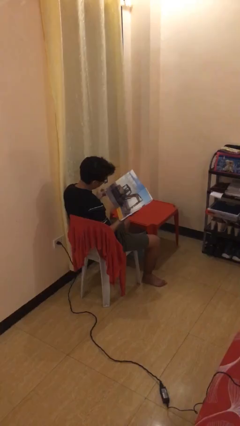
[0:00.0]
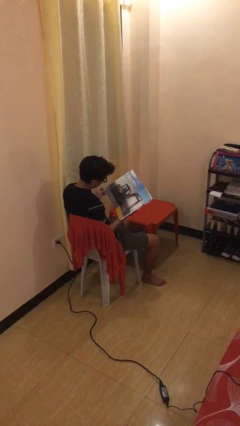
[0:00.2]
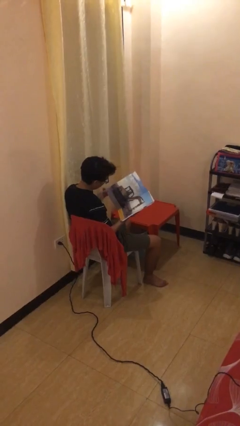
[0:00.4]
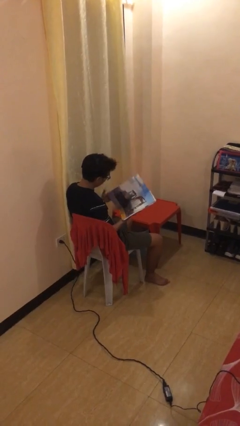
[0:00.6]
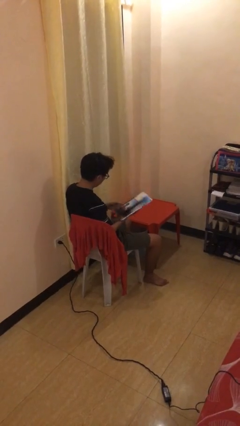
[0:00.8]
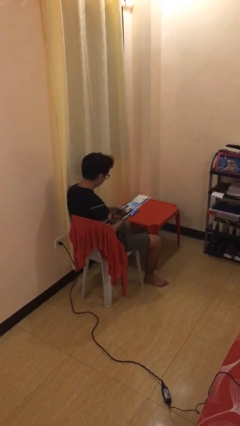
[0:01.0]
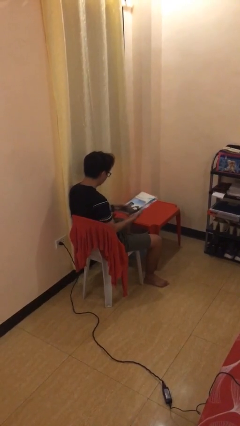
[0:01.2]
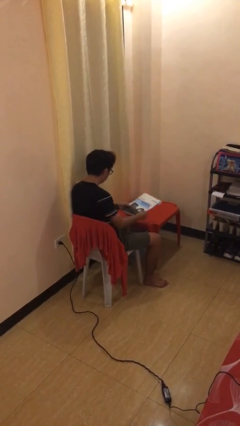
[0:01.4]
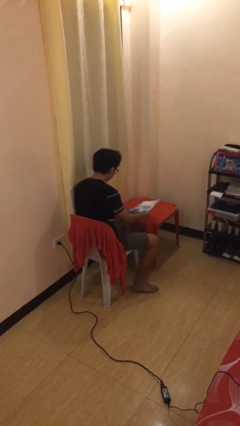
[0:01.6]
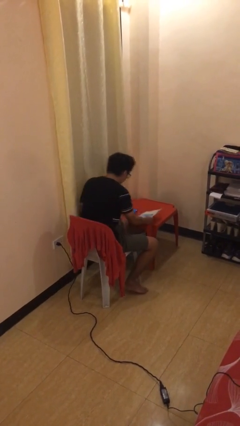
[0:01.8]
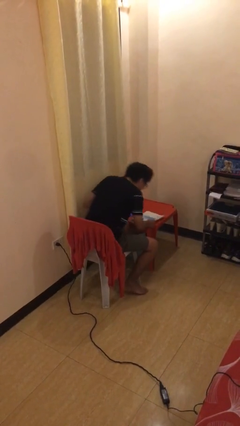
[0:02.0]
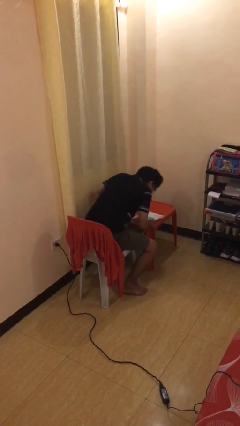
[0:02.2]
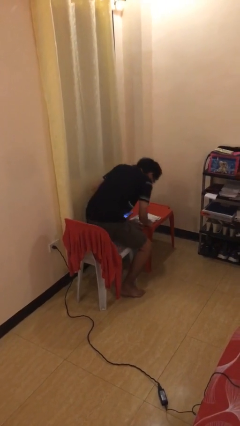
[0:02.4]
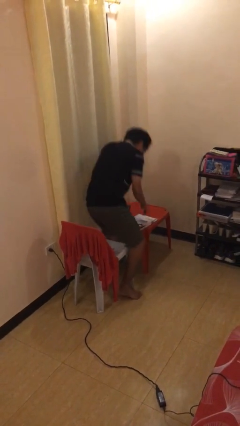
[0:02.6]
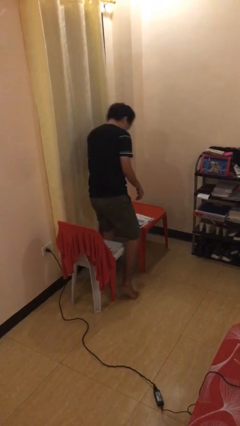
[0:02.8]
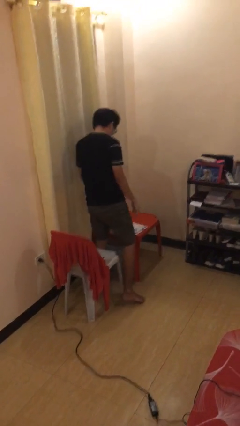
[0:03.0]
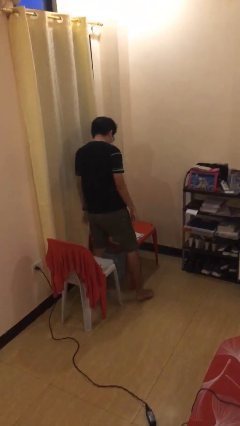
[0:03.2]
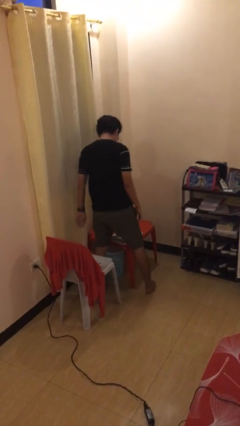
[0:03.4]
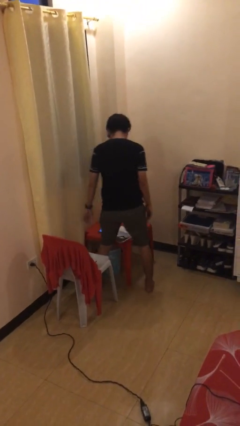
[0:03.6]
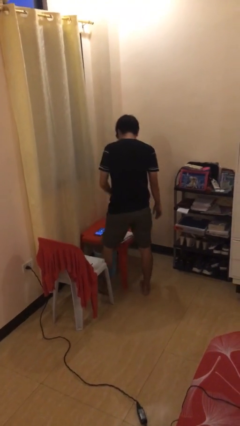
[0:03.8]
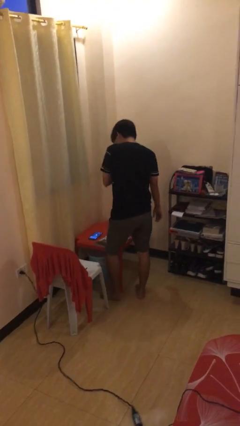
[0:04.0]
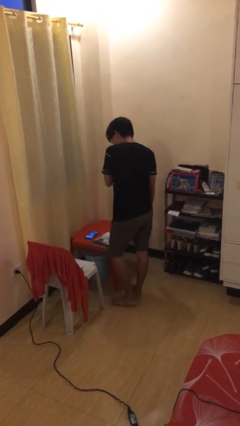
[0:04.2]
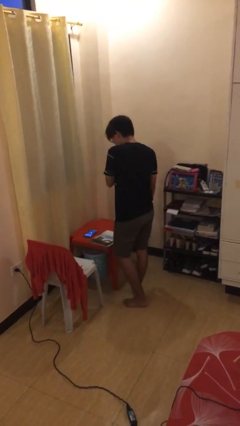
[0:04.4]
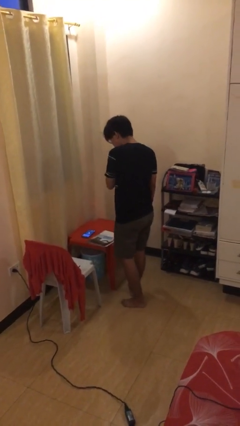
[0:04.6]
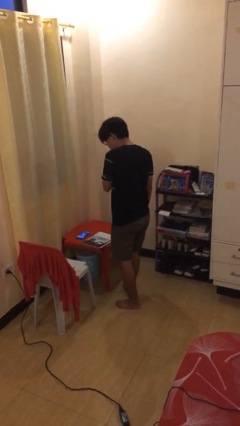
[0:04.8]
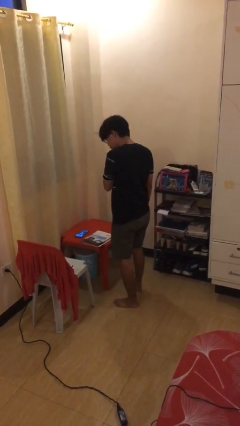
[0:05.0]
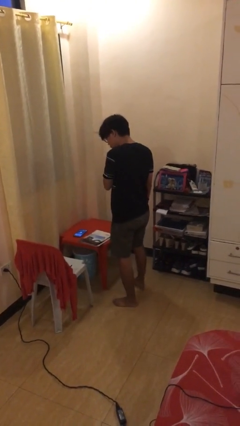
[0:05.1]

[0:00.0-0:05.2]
person stands up

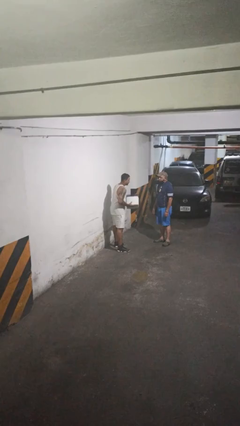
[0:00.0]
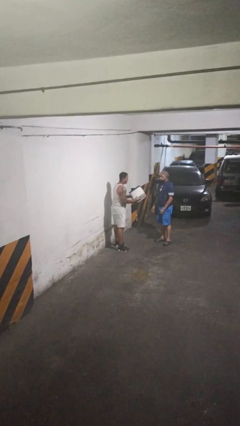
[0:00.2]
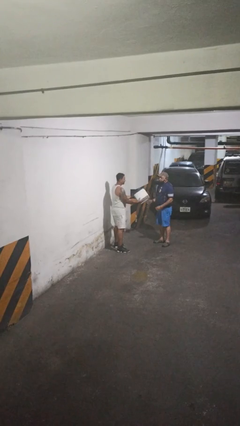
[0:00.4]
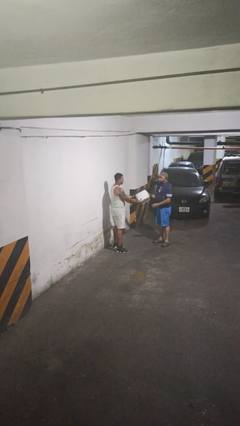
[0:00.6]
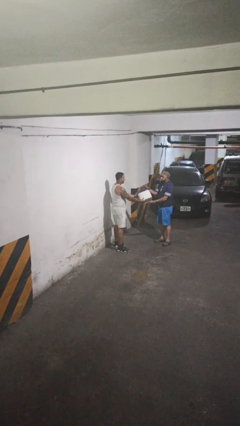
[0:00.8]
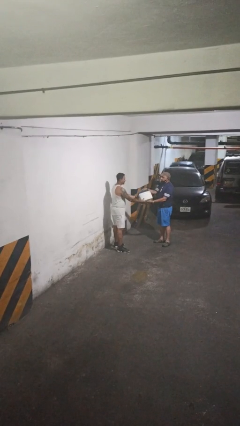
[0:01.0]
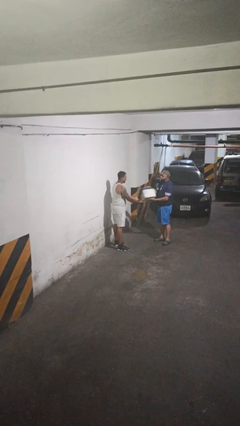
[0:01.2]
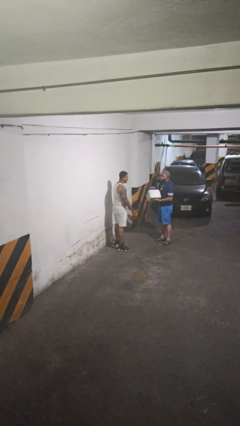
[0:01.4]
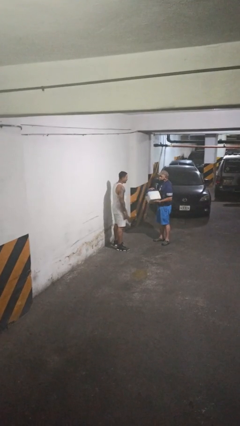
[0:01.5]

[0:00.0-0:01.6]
person transfers object to person

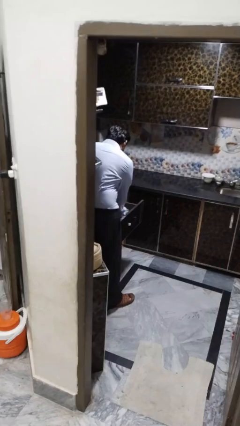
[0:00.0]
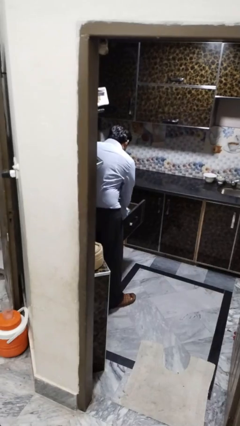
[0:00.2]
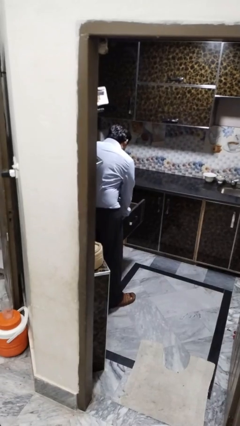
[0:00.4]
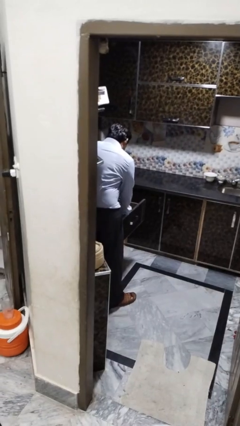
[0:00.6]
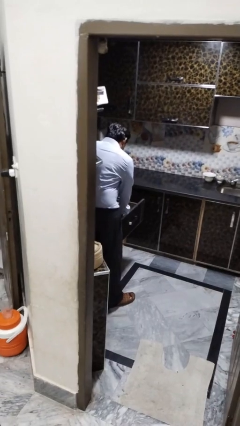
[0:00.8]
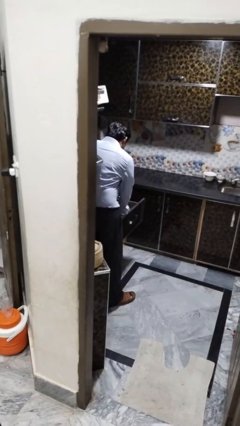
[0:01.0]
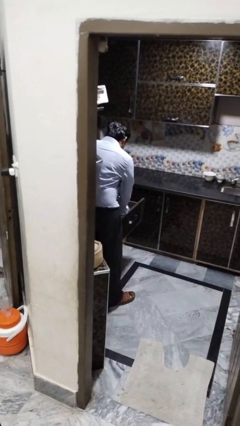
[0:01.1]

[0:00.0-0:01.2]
person searches in kitchen drawer

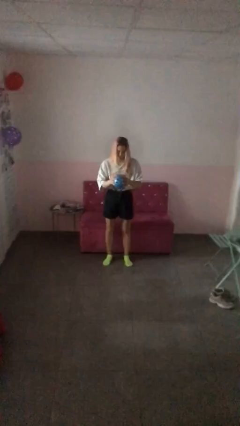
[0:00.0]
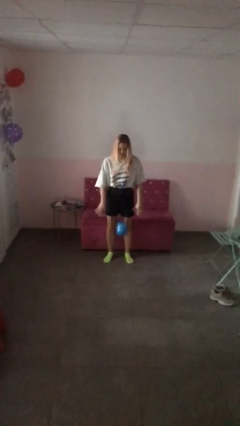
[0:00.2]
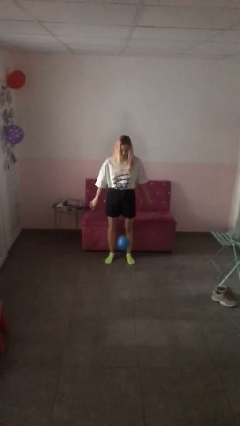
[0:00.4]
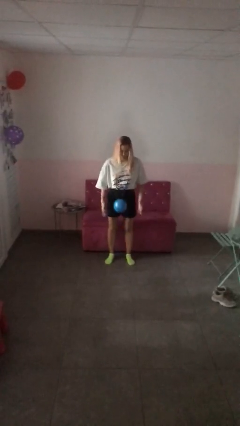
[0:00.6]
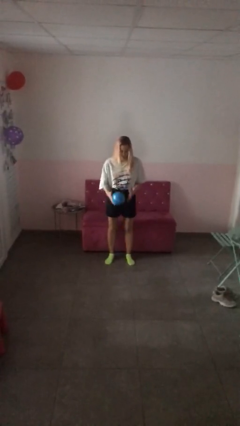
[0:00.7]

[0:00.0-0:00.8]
person bounces ball on floor

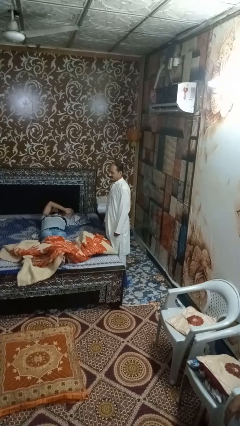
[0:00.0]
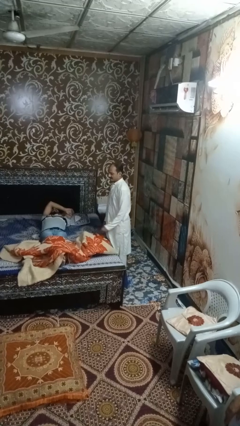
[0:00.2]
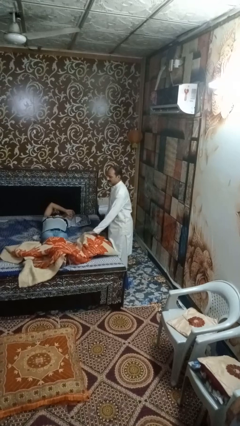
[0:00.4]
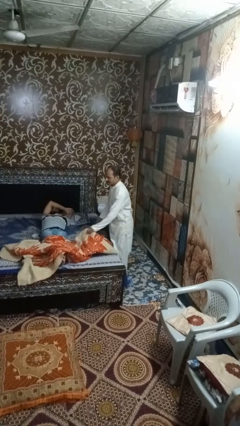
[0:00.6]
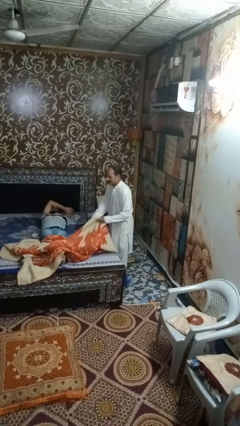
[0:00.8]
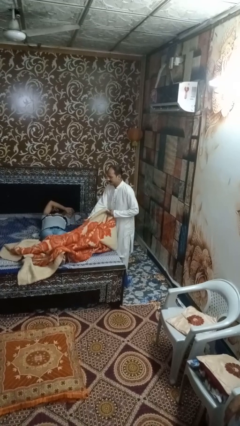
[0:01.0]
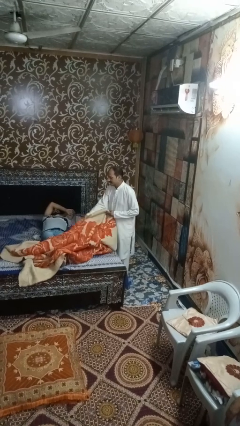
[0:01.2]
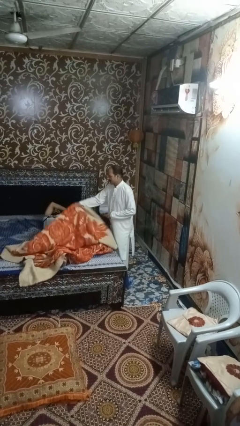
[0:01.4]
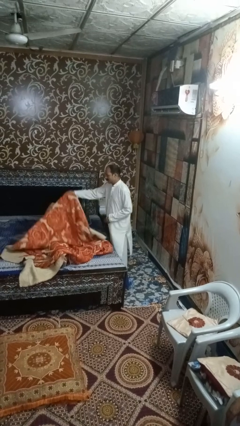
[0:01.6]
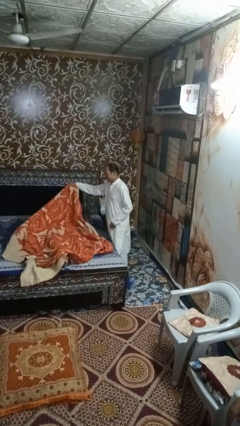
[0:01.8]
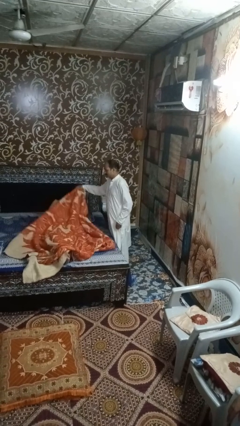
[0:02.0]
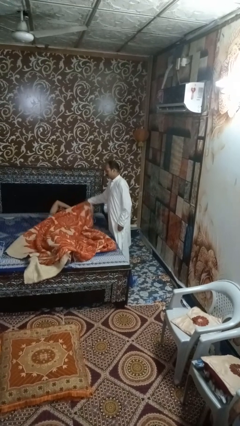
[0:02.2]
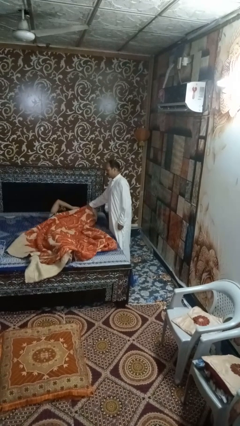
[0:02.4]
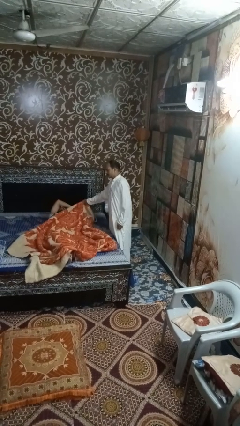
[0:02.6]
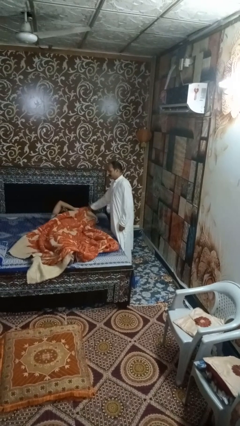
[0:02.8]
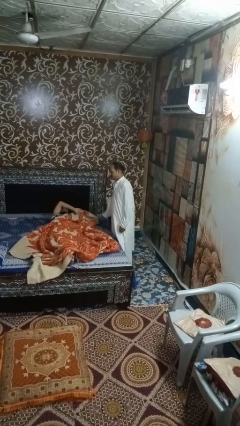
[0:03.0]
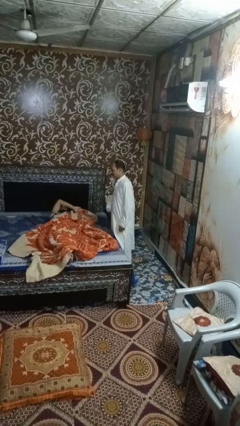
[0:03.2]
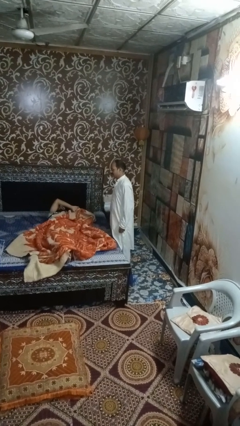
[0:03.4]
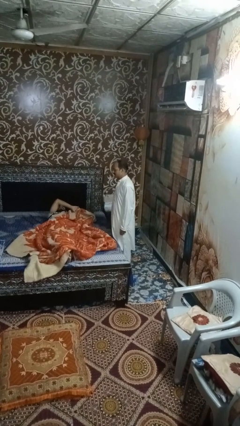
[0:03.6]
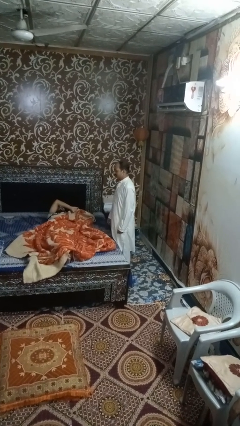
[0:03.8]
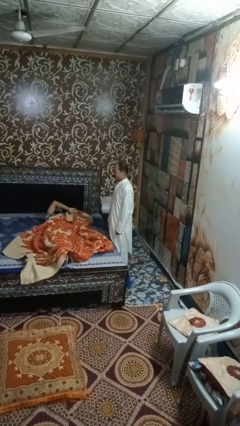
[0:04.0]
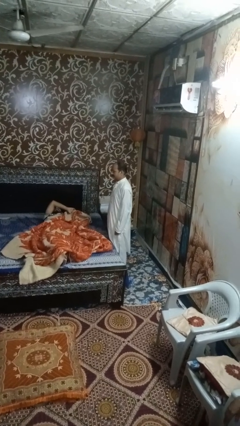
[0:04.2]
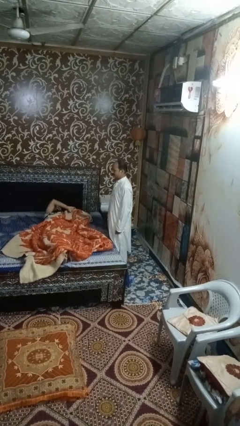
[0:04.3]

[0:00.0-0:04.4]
person covers friend with blanket

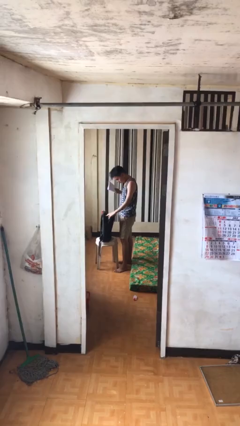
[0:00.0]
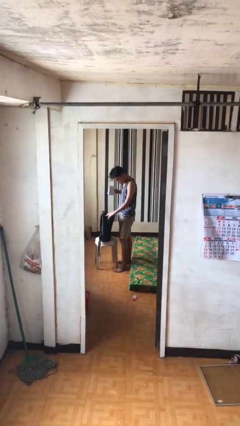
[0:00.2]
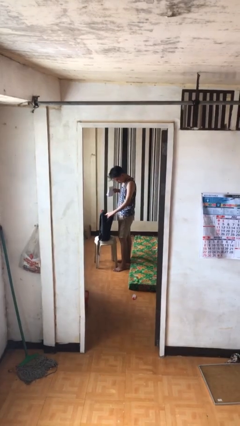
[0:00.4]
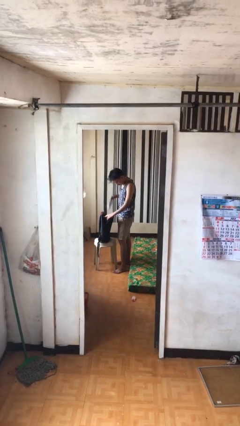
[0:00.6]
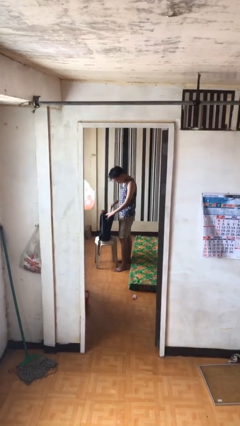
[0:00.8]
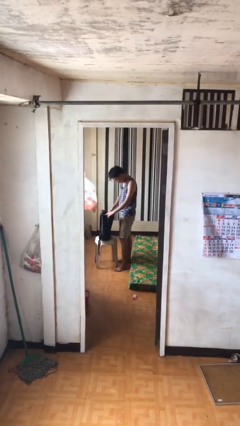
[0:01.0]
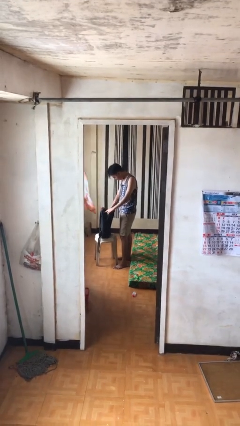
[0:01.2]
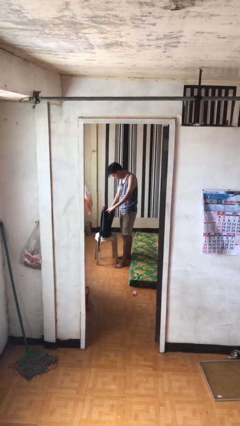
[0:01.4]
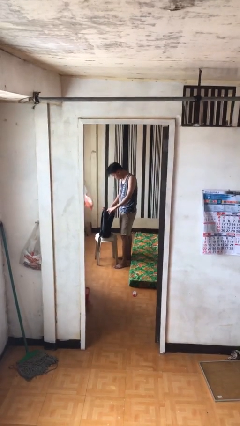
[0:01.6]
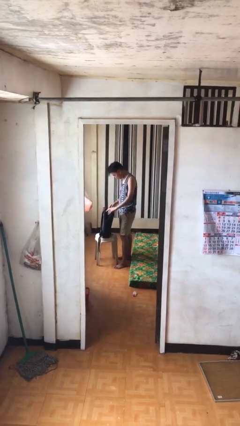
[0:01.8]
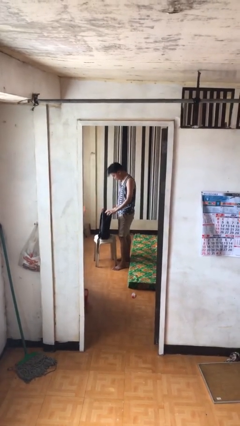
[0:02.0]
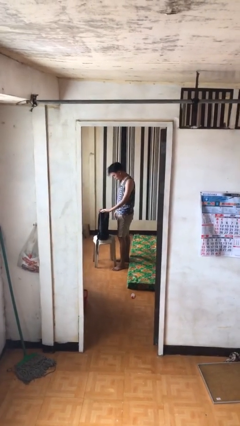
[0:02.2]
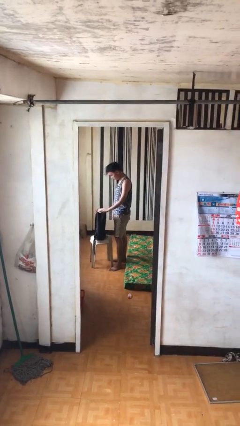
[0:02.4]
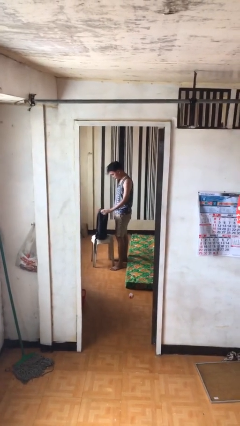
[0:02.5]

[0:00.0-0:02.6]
person puts object into backpack

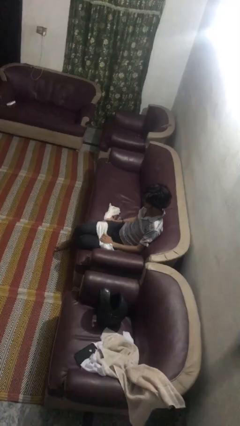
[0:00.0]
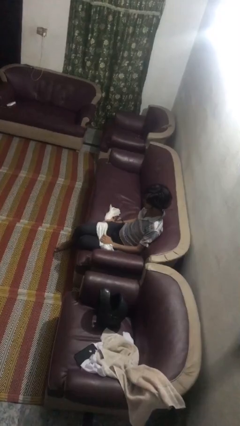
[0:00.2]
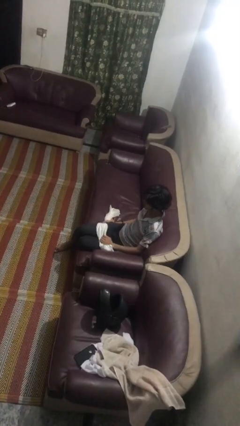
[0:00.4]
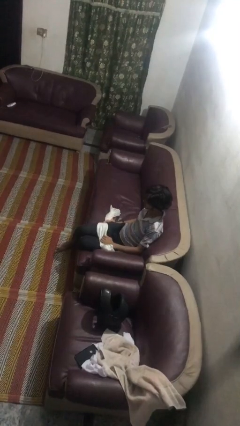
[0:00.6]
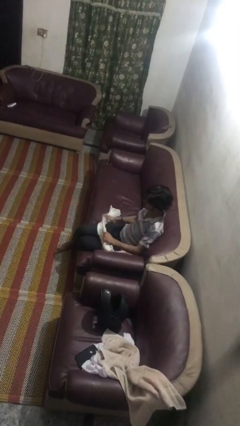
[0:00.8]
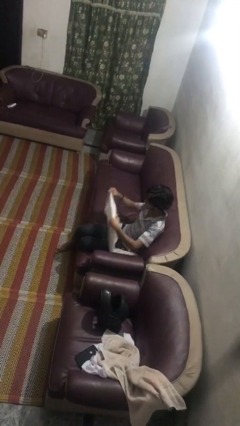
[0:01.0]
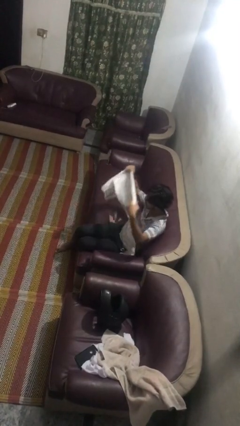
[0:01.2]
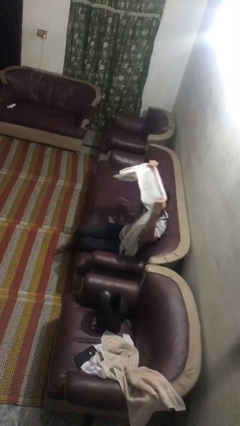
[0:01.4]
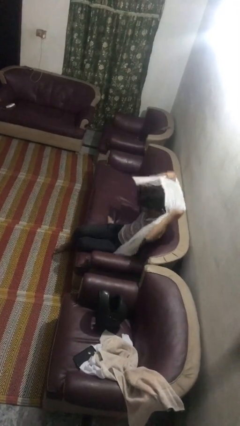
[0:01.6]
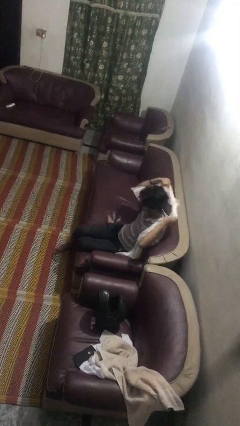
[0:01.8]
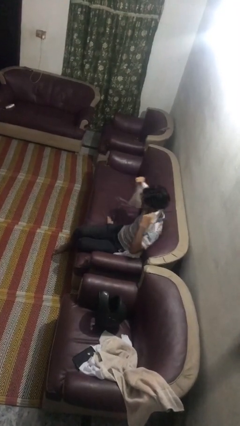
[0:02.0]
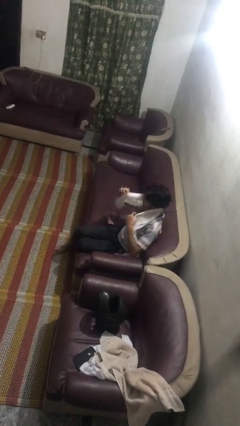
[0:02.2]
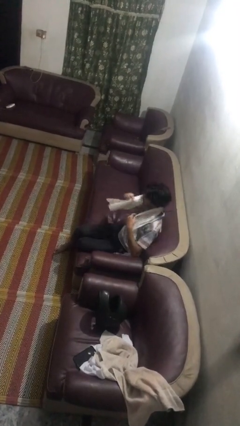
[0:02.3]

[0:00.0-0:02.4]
person puts on scarf
